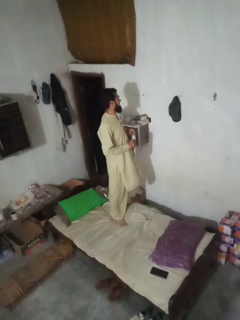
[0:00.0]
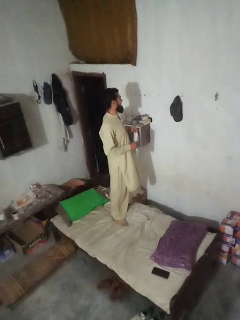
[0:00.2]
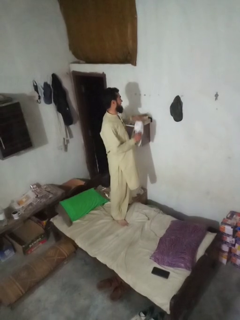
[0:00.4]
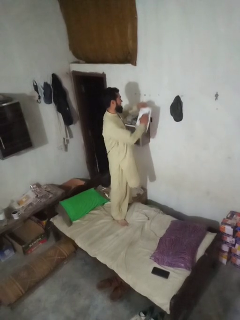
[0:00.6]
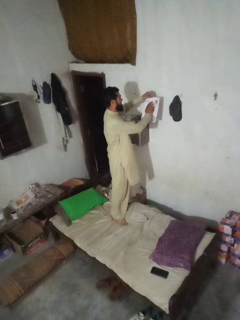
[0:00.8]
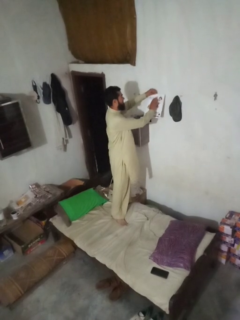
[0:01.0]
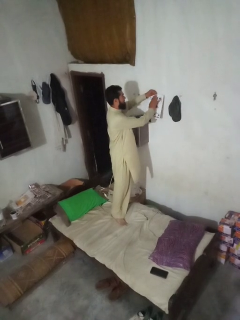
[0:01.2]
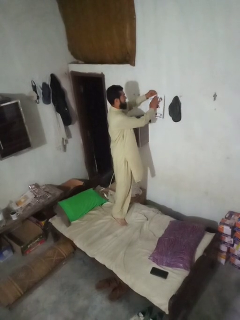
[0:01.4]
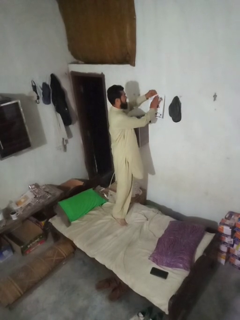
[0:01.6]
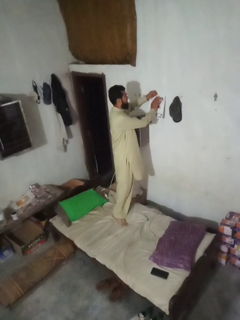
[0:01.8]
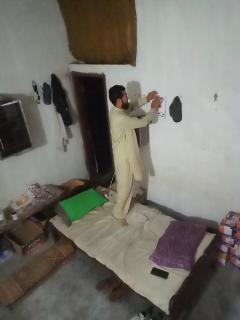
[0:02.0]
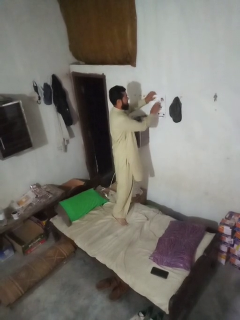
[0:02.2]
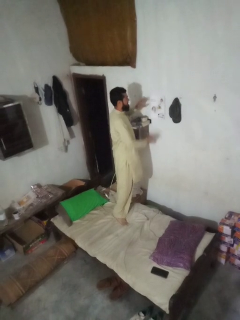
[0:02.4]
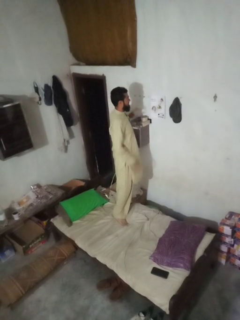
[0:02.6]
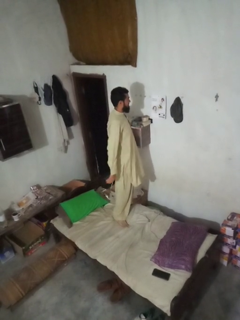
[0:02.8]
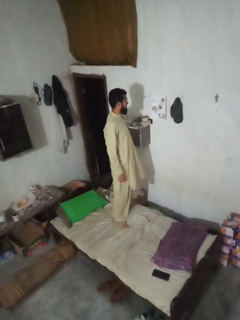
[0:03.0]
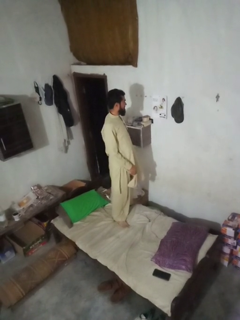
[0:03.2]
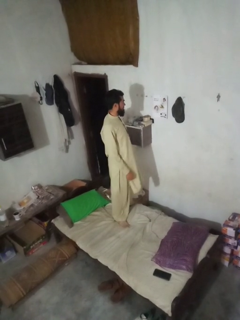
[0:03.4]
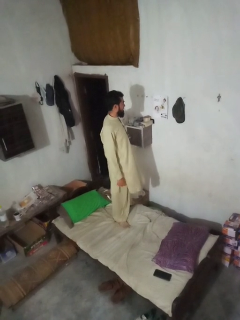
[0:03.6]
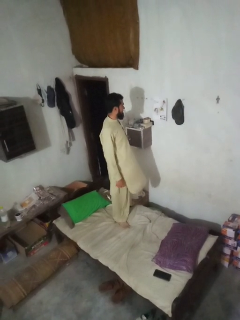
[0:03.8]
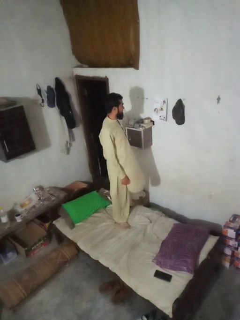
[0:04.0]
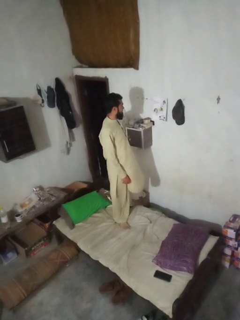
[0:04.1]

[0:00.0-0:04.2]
person puts up picture frame

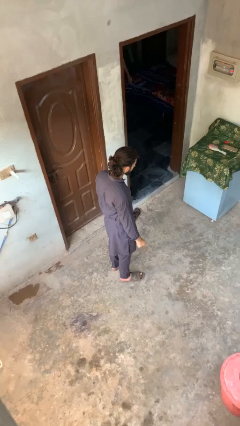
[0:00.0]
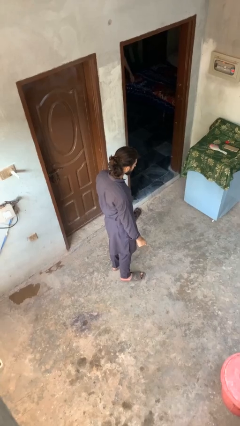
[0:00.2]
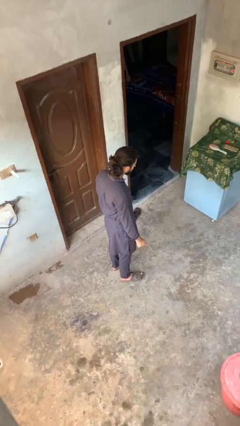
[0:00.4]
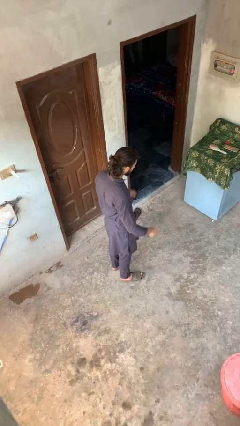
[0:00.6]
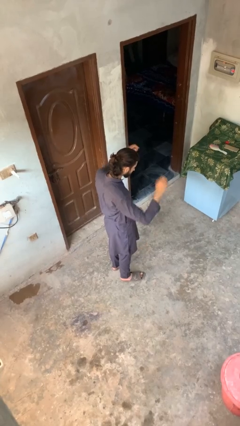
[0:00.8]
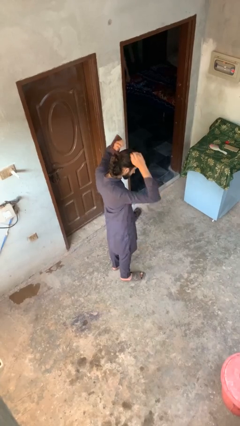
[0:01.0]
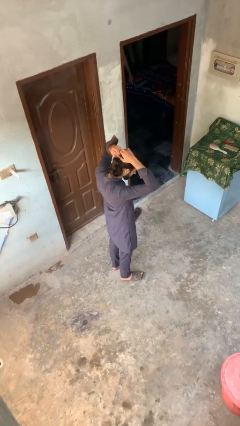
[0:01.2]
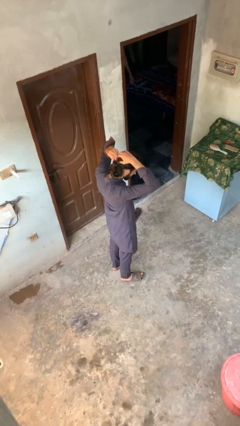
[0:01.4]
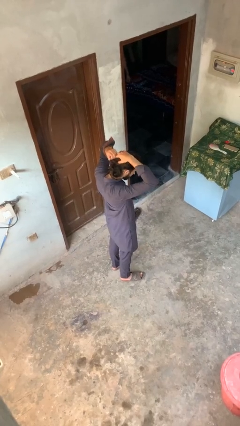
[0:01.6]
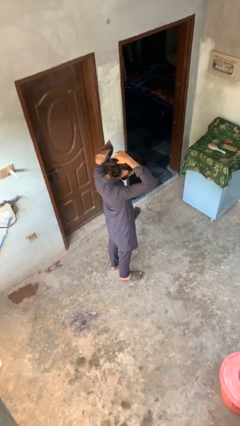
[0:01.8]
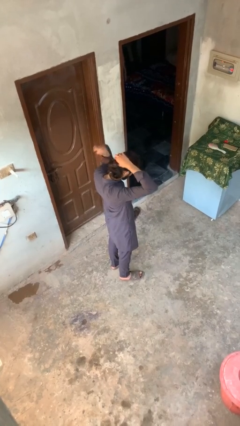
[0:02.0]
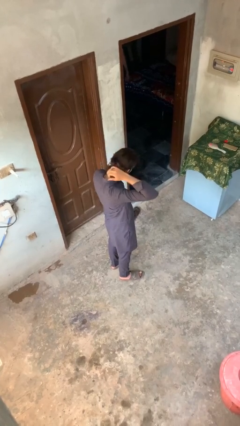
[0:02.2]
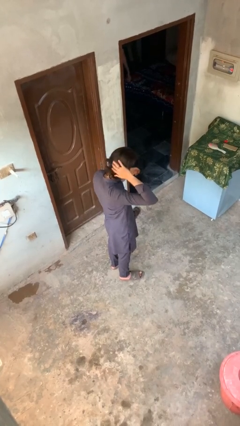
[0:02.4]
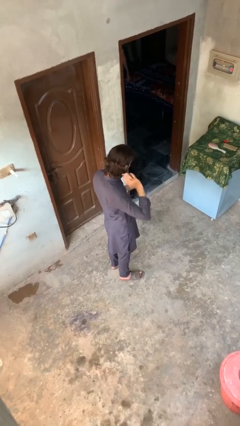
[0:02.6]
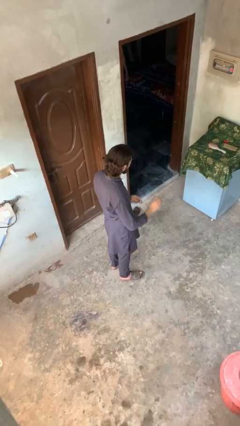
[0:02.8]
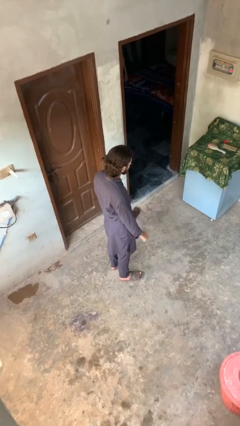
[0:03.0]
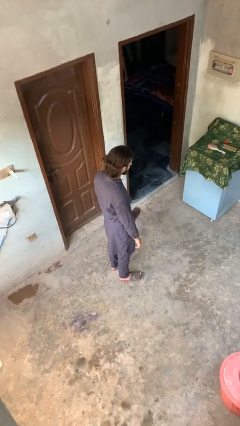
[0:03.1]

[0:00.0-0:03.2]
person takes off hairtie

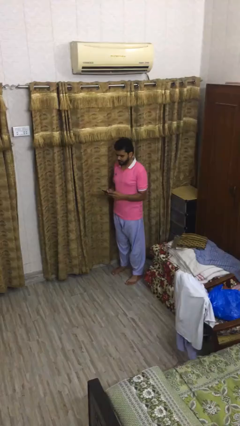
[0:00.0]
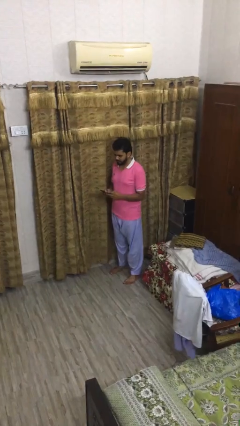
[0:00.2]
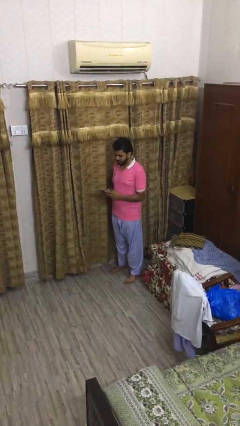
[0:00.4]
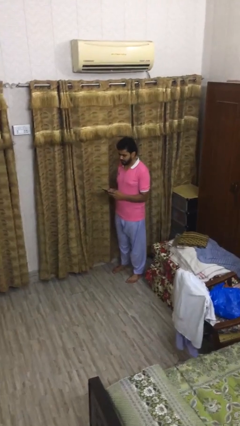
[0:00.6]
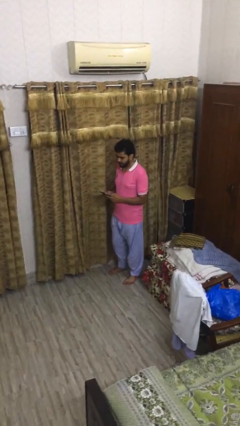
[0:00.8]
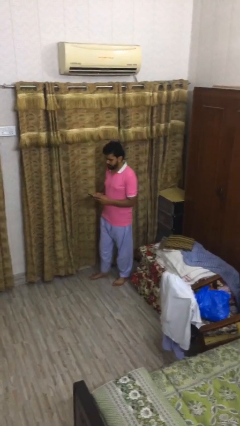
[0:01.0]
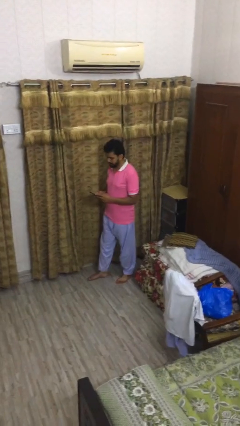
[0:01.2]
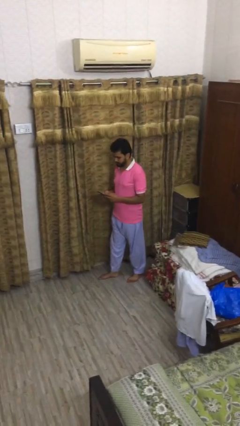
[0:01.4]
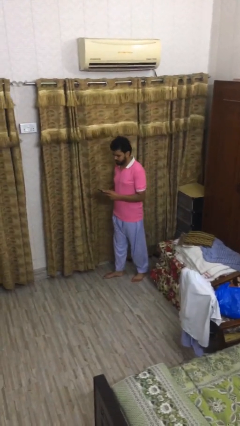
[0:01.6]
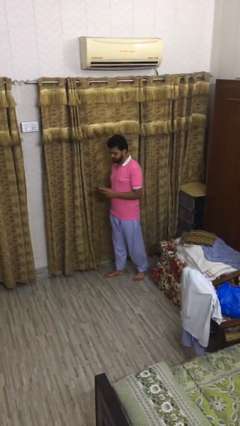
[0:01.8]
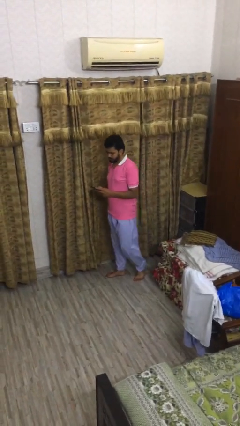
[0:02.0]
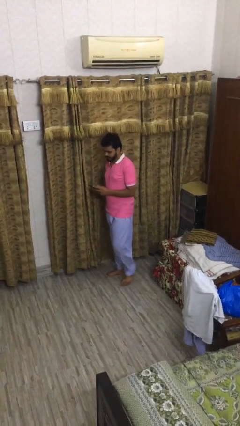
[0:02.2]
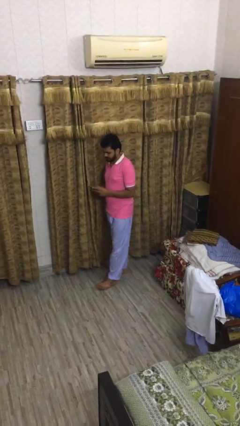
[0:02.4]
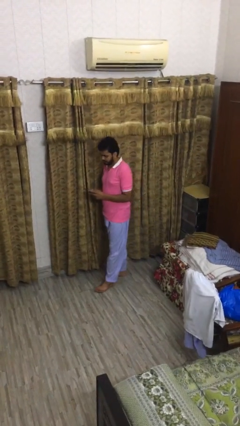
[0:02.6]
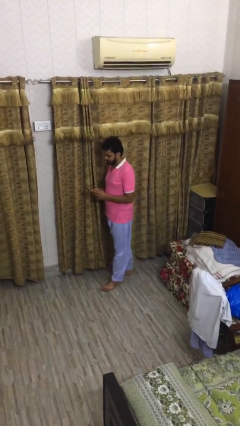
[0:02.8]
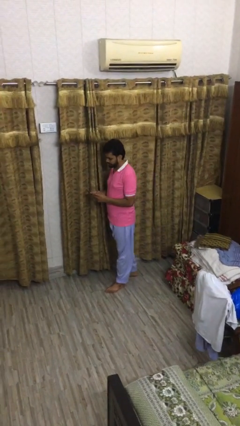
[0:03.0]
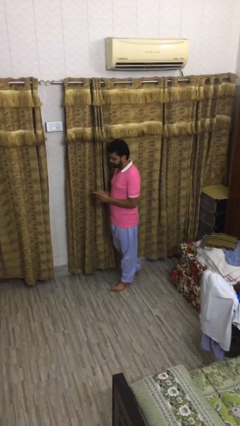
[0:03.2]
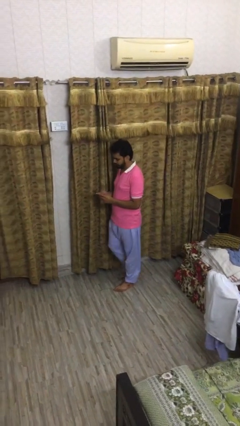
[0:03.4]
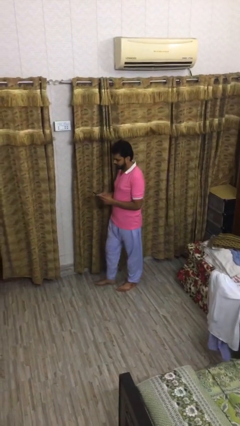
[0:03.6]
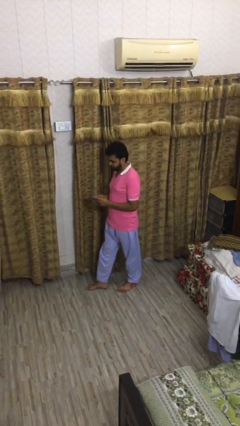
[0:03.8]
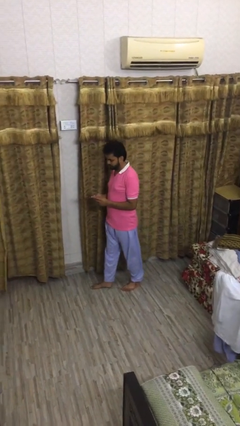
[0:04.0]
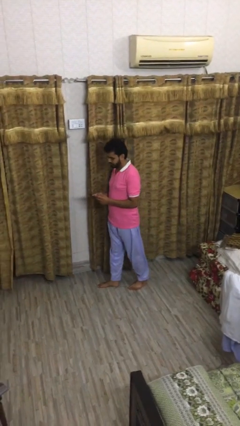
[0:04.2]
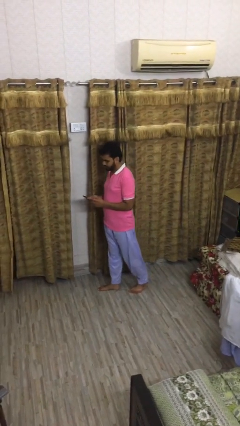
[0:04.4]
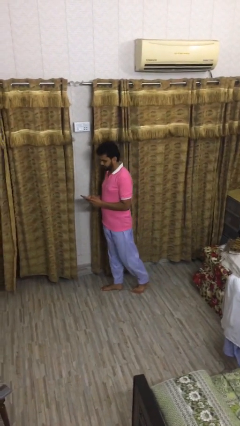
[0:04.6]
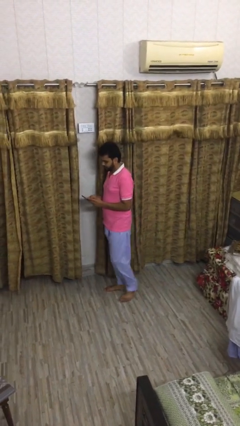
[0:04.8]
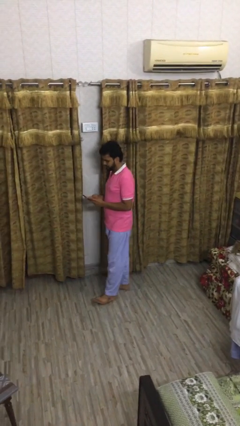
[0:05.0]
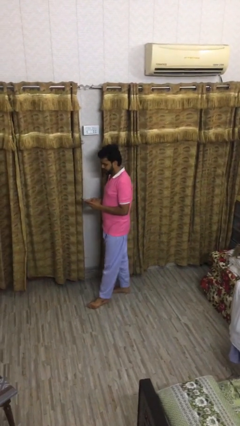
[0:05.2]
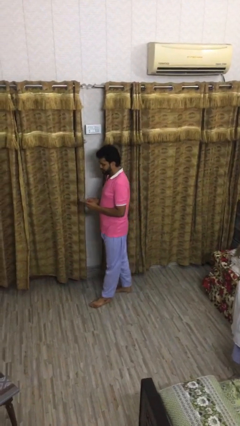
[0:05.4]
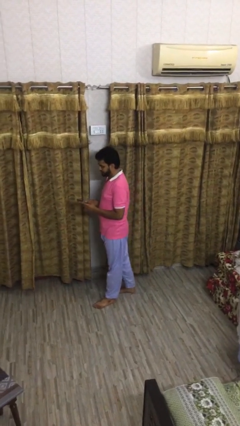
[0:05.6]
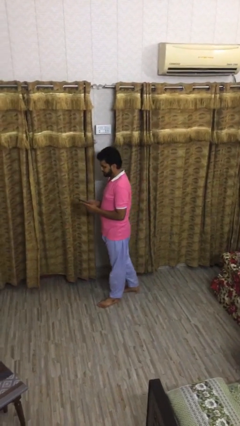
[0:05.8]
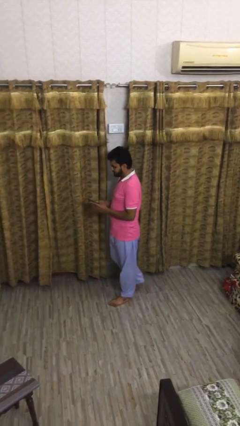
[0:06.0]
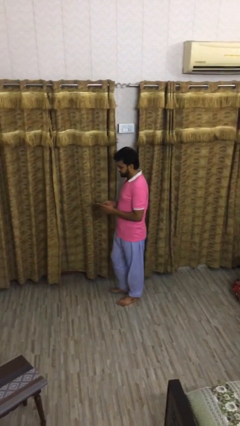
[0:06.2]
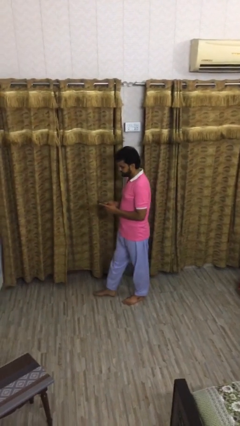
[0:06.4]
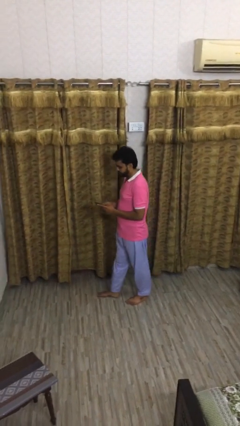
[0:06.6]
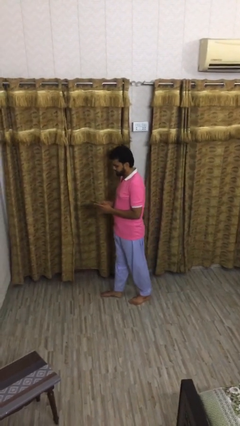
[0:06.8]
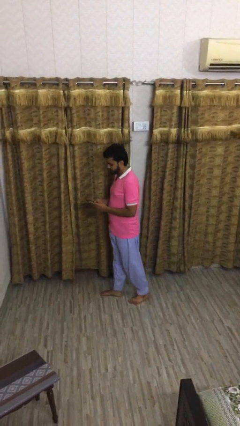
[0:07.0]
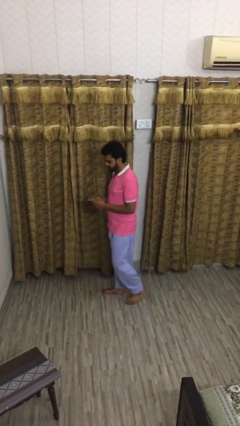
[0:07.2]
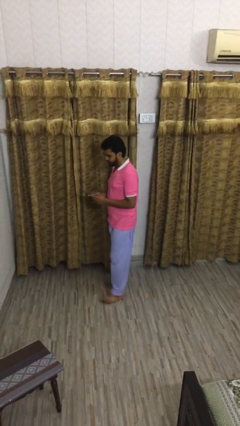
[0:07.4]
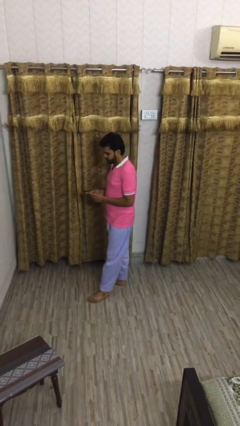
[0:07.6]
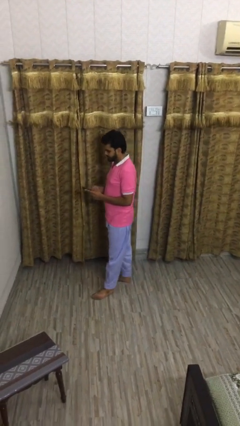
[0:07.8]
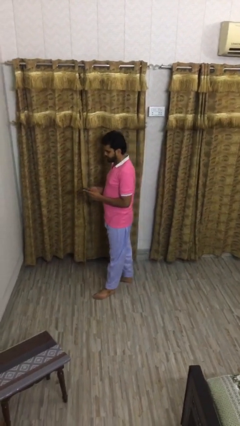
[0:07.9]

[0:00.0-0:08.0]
person texts on phone

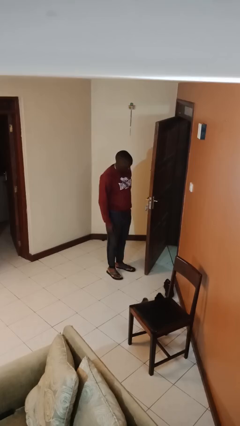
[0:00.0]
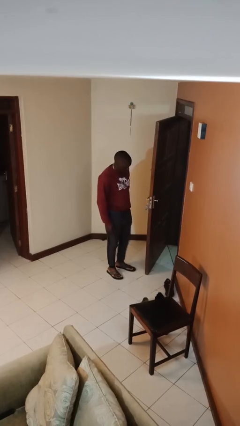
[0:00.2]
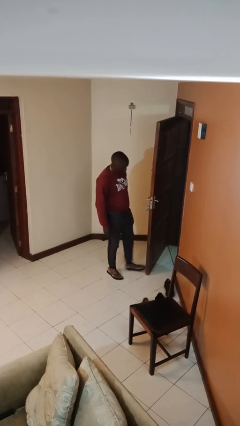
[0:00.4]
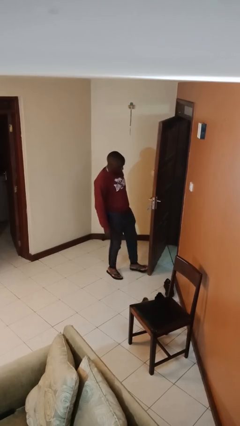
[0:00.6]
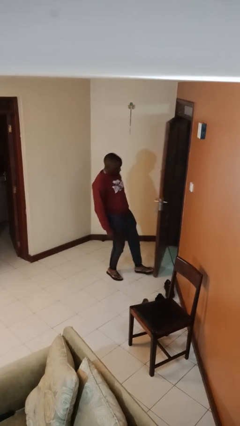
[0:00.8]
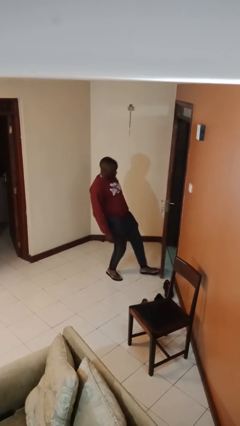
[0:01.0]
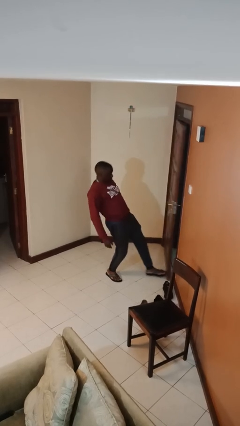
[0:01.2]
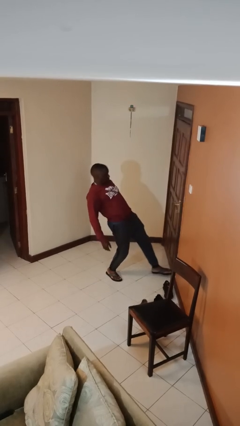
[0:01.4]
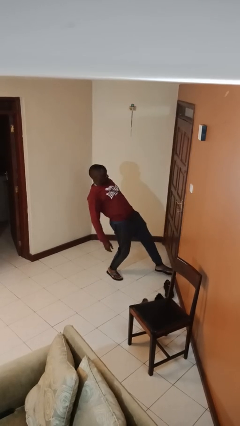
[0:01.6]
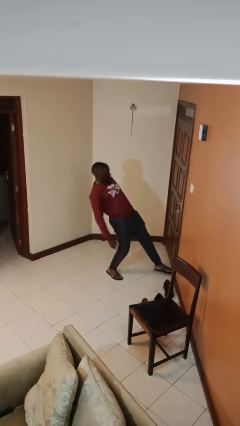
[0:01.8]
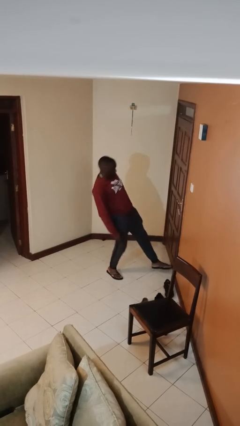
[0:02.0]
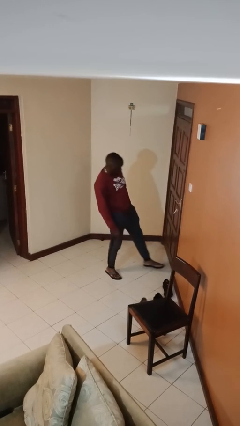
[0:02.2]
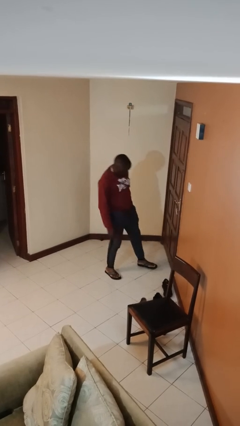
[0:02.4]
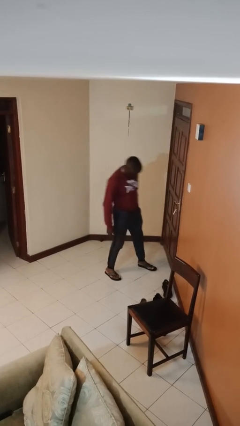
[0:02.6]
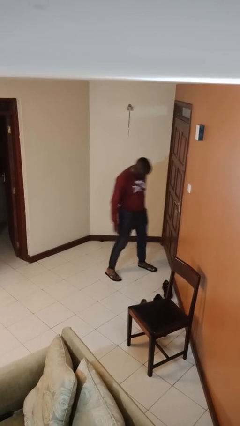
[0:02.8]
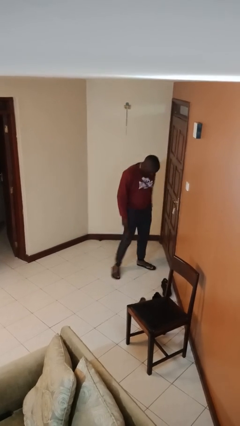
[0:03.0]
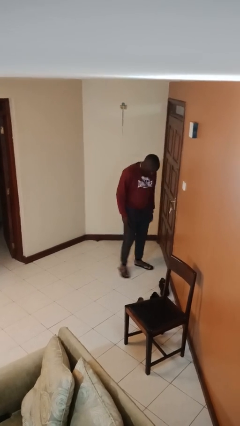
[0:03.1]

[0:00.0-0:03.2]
person closes door with foot

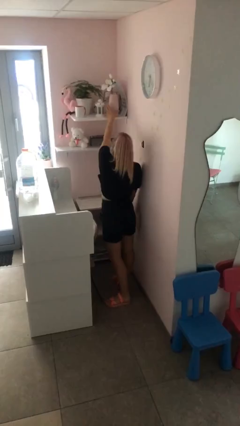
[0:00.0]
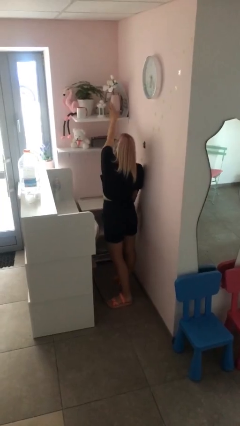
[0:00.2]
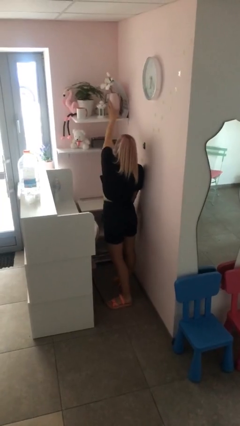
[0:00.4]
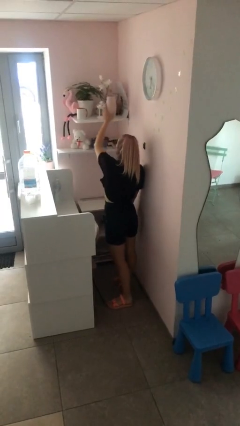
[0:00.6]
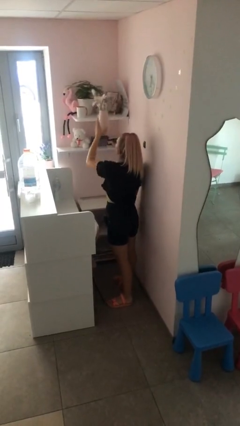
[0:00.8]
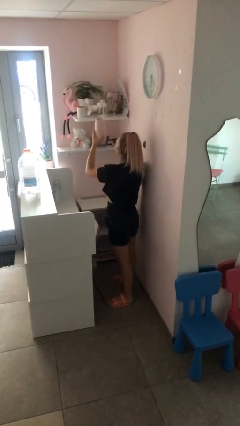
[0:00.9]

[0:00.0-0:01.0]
person picks up object from cabinet
